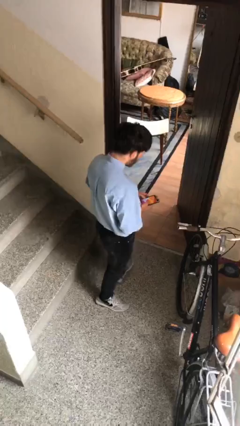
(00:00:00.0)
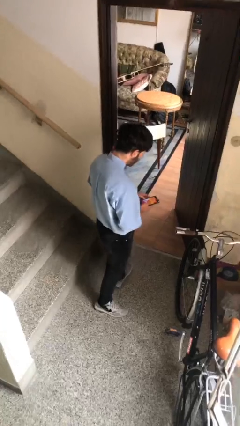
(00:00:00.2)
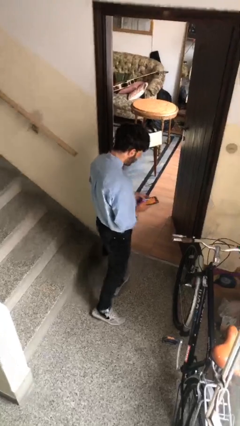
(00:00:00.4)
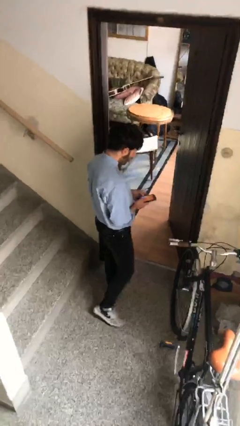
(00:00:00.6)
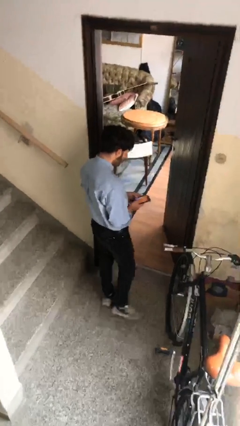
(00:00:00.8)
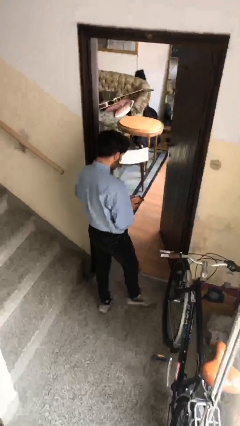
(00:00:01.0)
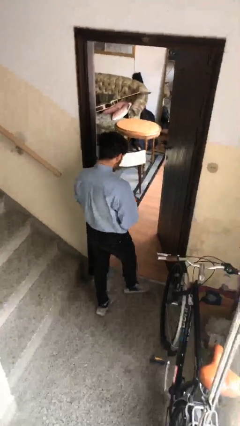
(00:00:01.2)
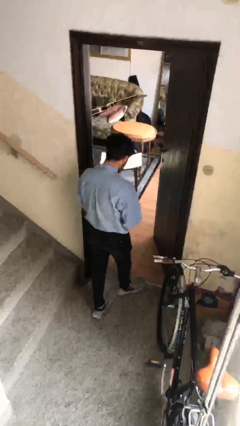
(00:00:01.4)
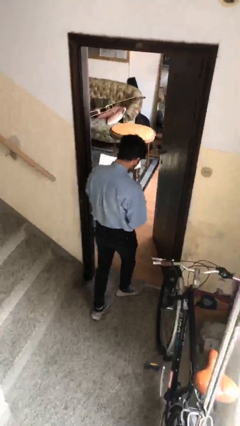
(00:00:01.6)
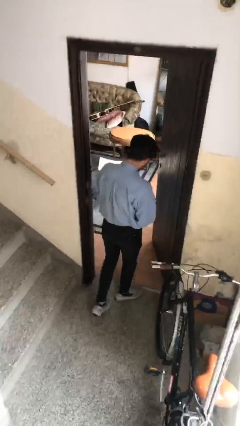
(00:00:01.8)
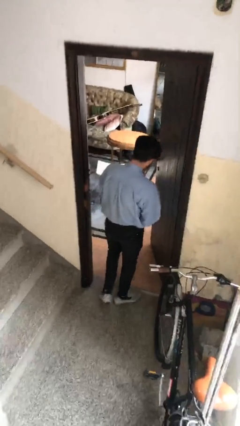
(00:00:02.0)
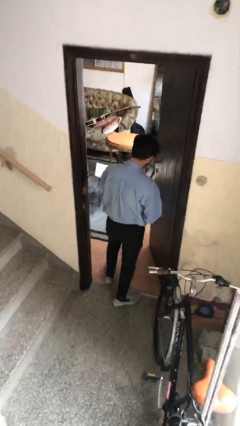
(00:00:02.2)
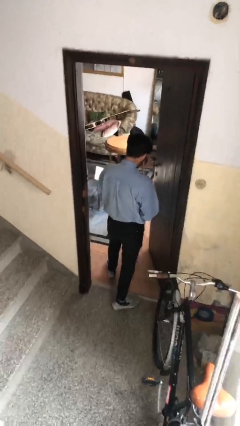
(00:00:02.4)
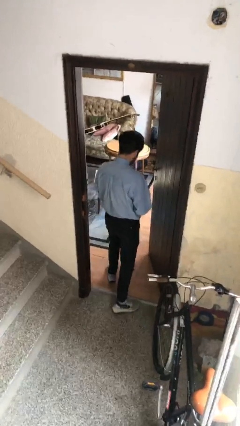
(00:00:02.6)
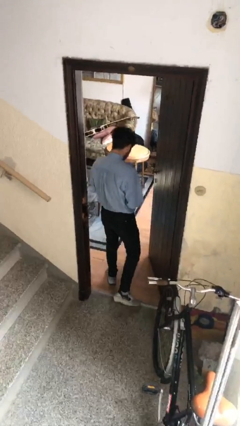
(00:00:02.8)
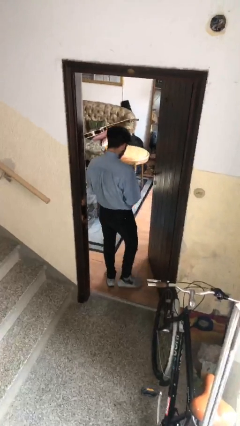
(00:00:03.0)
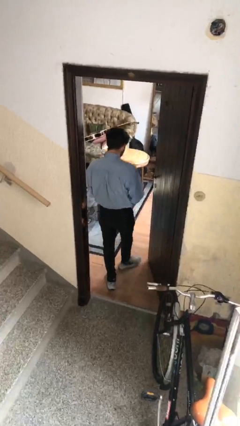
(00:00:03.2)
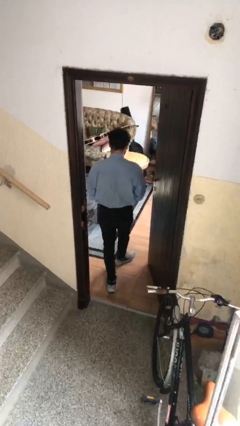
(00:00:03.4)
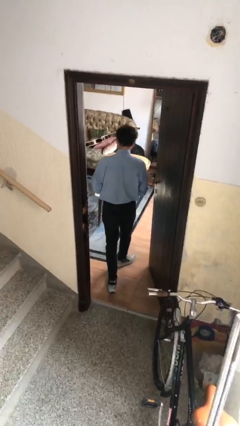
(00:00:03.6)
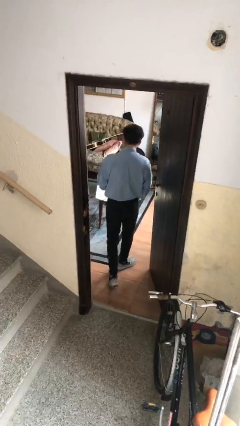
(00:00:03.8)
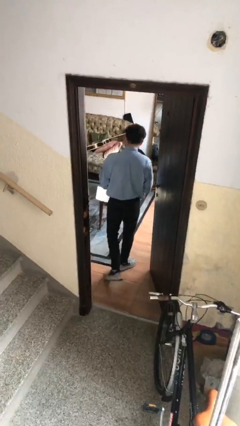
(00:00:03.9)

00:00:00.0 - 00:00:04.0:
person texts on phone

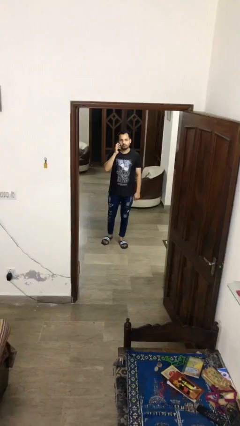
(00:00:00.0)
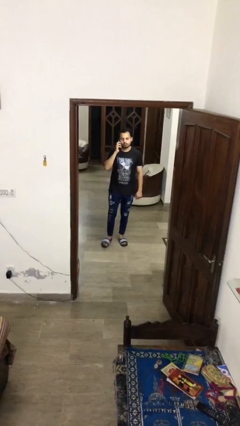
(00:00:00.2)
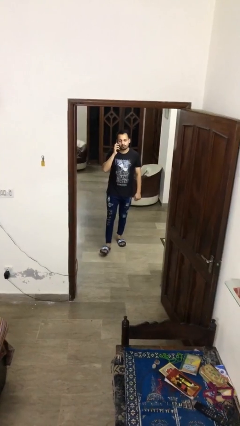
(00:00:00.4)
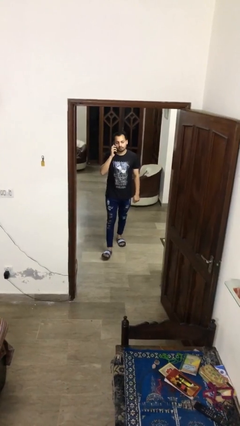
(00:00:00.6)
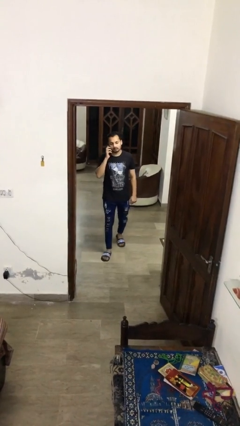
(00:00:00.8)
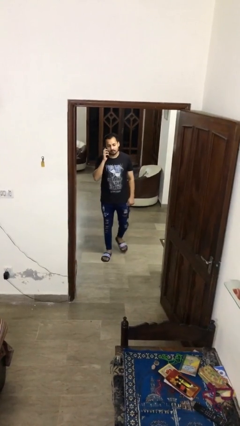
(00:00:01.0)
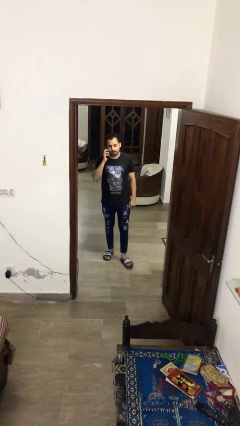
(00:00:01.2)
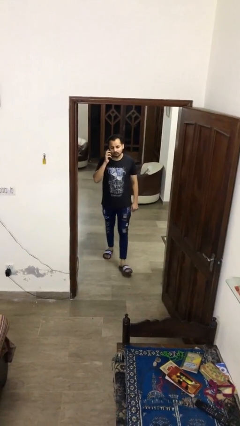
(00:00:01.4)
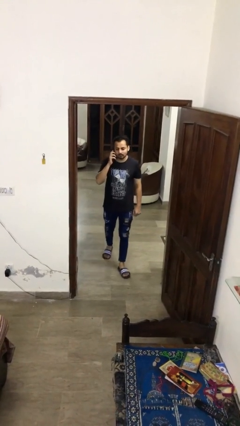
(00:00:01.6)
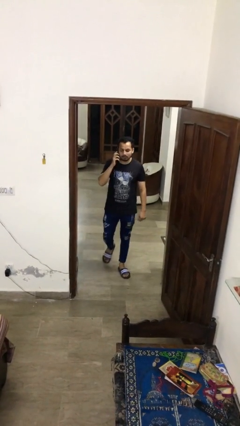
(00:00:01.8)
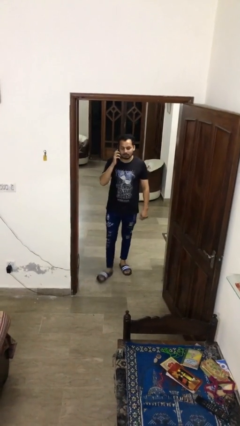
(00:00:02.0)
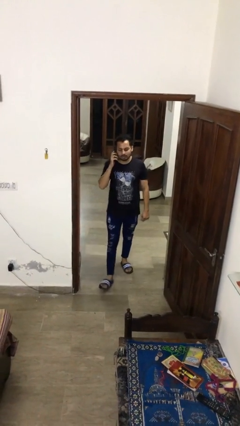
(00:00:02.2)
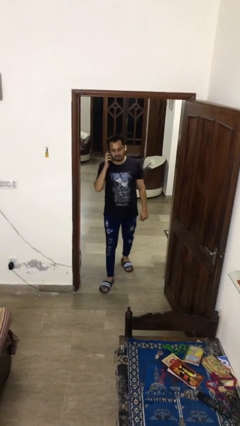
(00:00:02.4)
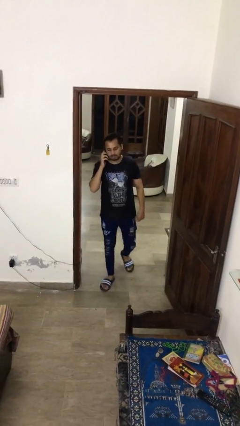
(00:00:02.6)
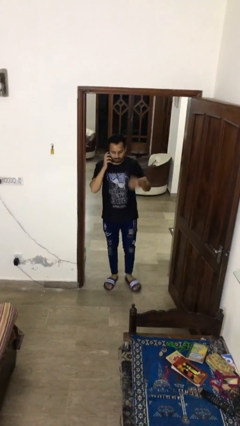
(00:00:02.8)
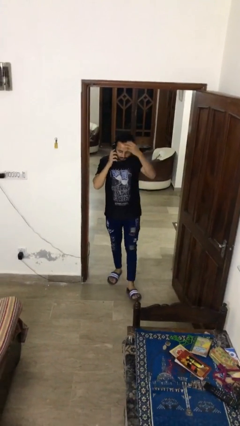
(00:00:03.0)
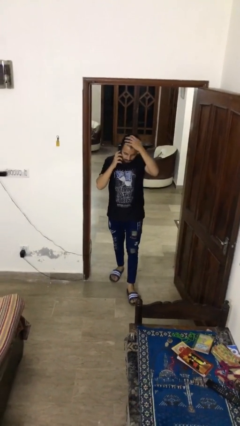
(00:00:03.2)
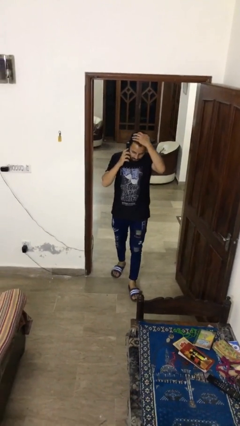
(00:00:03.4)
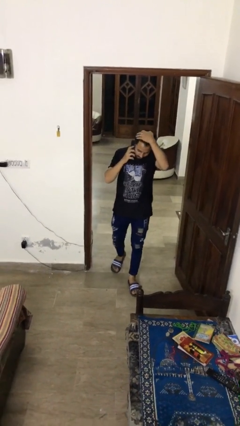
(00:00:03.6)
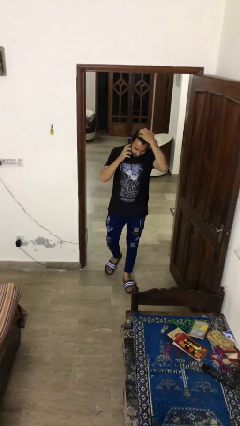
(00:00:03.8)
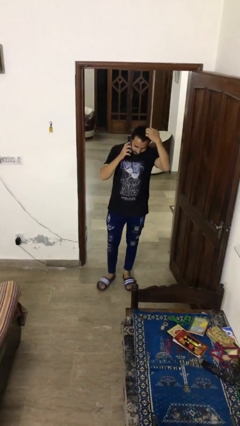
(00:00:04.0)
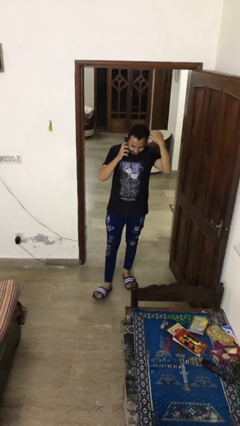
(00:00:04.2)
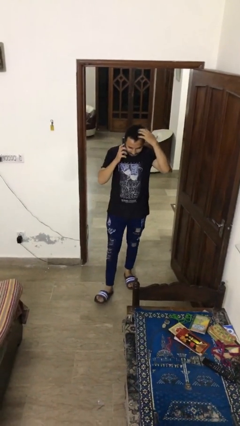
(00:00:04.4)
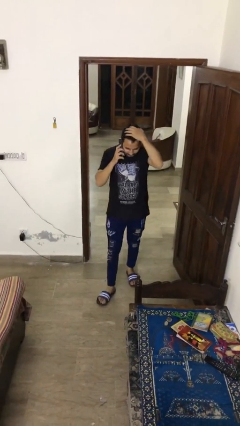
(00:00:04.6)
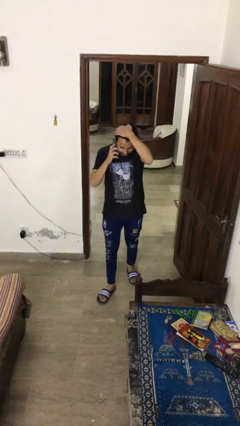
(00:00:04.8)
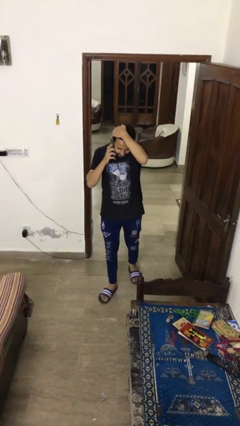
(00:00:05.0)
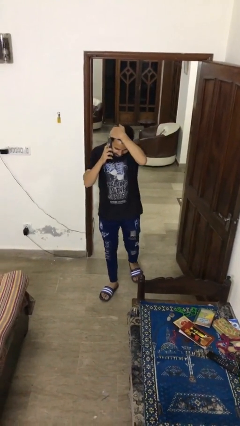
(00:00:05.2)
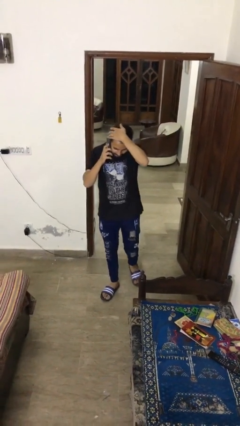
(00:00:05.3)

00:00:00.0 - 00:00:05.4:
person enters scene through structure

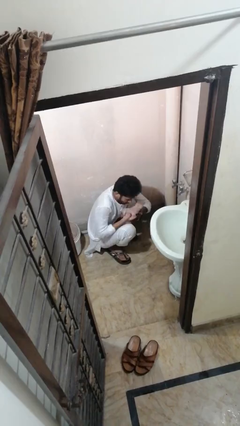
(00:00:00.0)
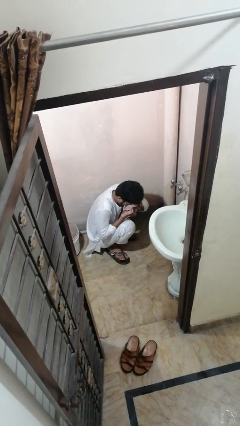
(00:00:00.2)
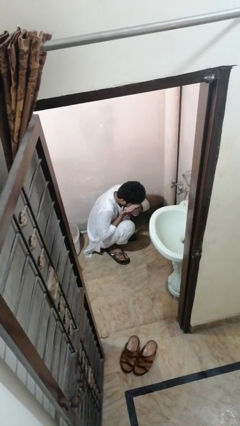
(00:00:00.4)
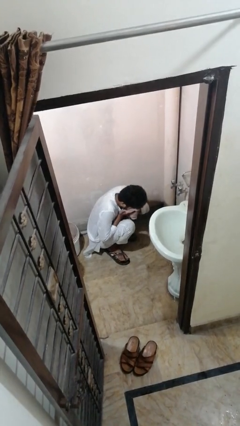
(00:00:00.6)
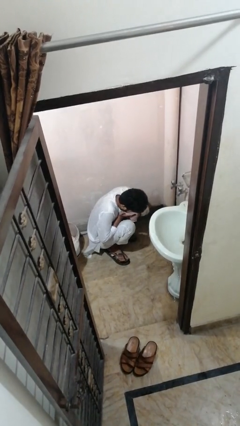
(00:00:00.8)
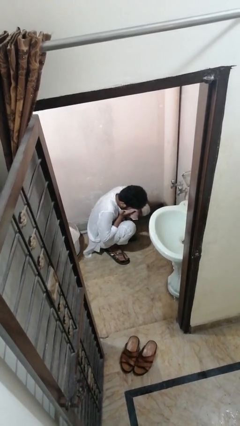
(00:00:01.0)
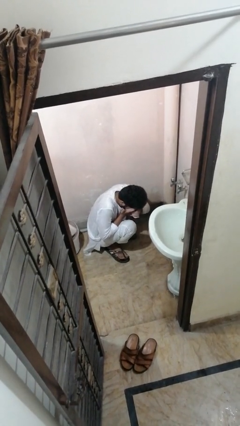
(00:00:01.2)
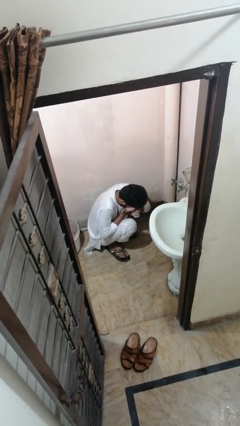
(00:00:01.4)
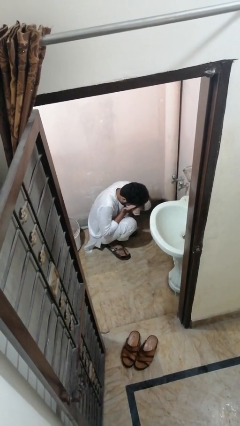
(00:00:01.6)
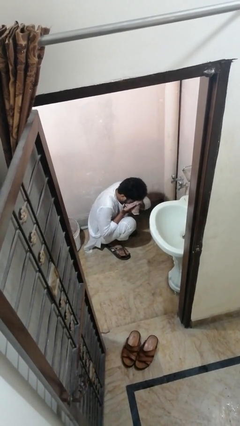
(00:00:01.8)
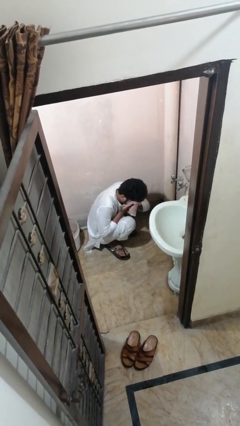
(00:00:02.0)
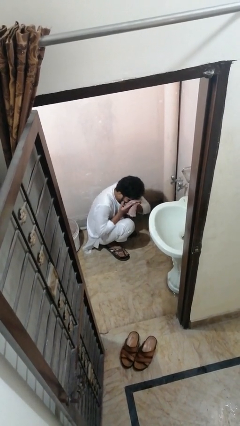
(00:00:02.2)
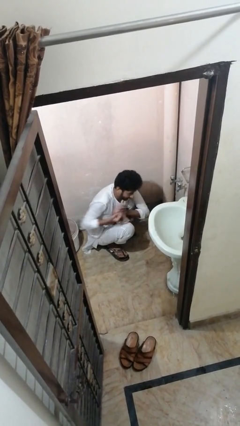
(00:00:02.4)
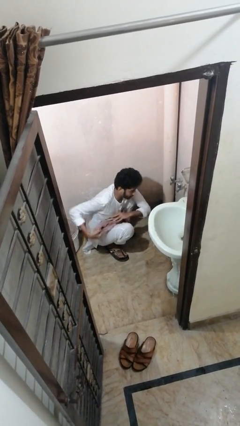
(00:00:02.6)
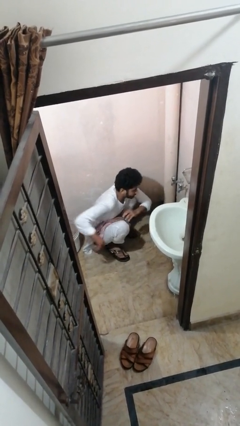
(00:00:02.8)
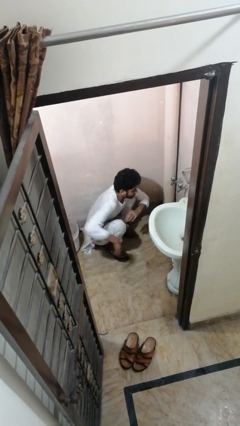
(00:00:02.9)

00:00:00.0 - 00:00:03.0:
person dries face with towel

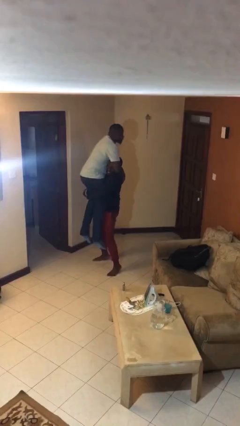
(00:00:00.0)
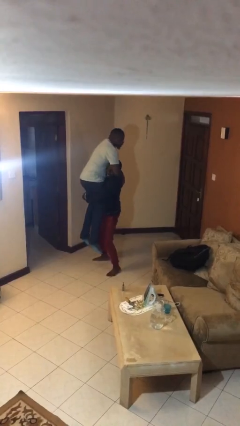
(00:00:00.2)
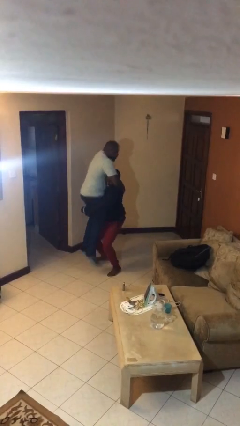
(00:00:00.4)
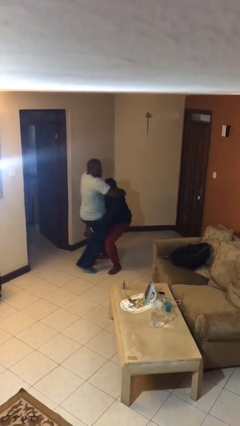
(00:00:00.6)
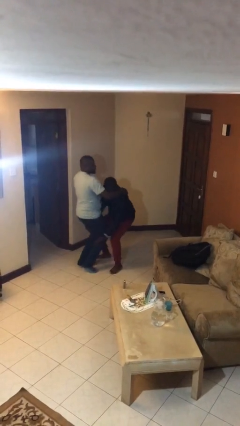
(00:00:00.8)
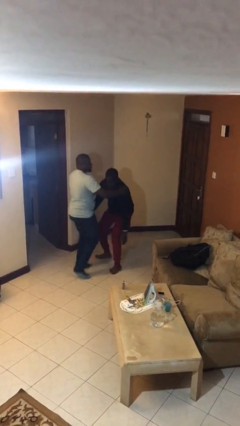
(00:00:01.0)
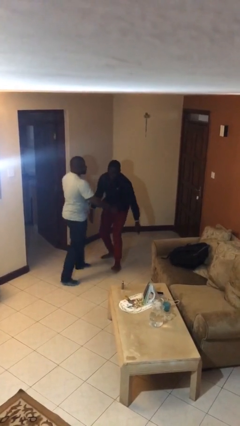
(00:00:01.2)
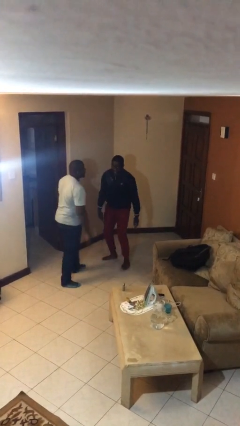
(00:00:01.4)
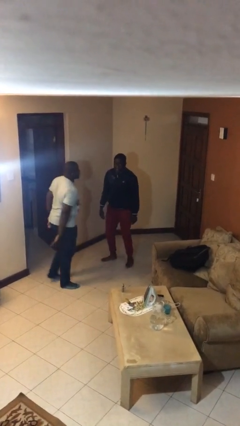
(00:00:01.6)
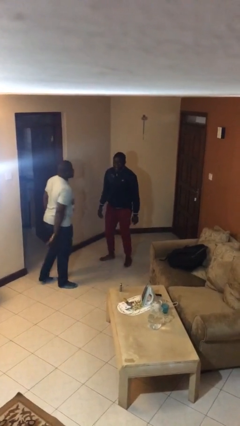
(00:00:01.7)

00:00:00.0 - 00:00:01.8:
person puts down person

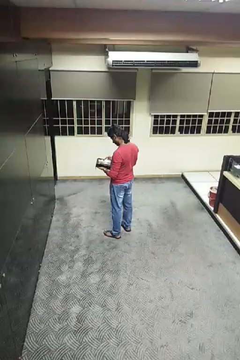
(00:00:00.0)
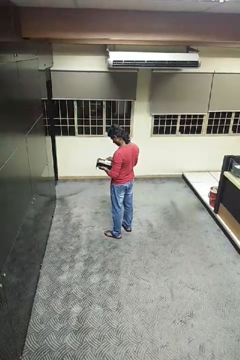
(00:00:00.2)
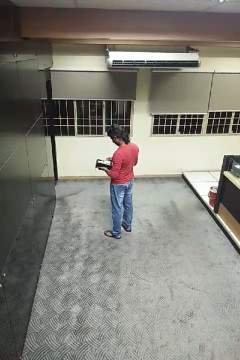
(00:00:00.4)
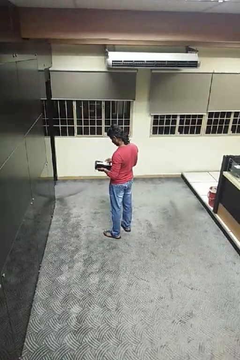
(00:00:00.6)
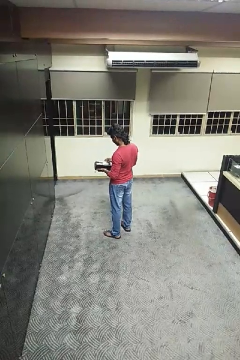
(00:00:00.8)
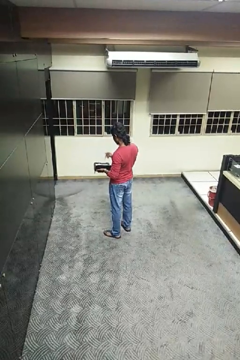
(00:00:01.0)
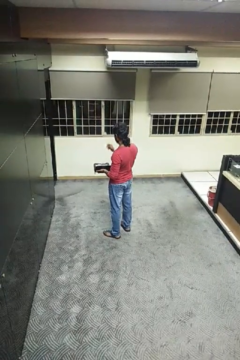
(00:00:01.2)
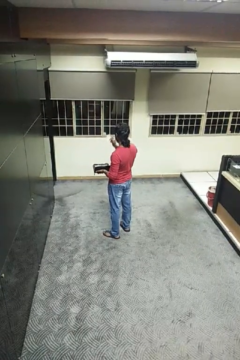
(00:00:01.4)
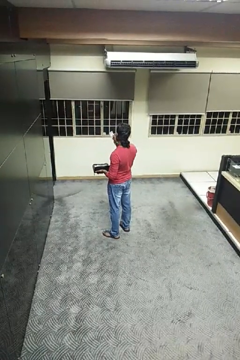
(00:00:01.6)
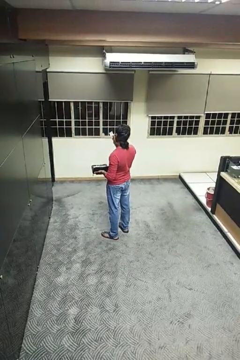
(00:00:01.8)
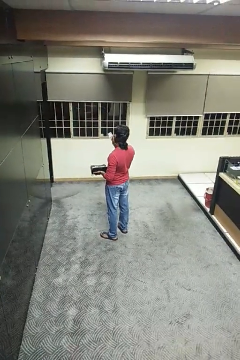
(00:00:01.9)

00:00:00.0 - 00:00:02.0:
person takes object from purse

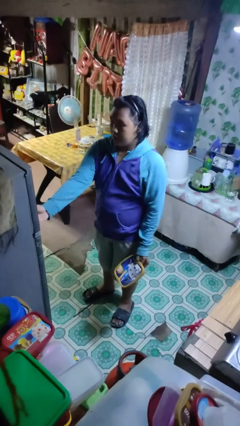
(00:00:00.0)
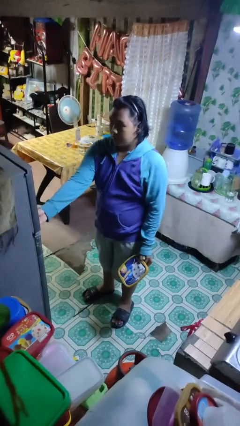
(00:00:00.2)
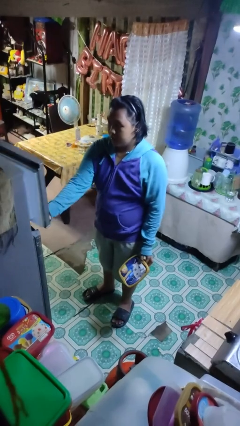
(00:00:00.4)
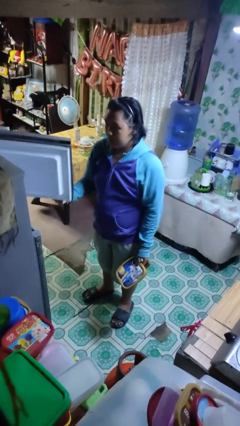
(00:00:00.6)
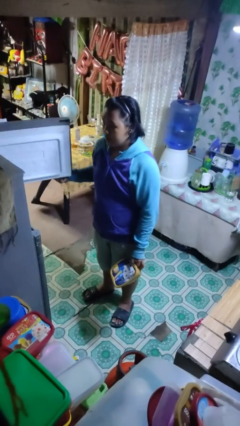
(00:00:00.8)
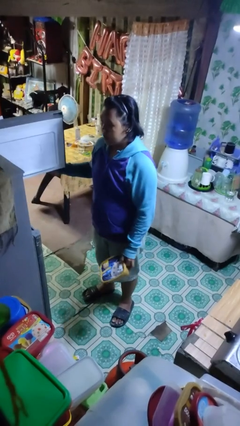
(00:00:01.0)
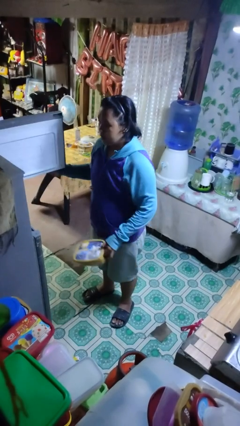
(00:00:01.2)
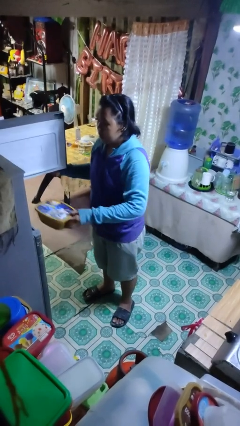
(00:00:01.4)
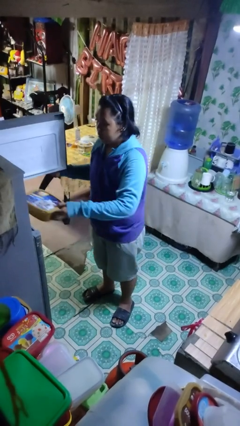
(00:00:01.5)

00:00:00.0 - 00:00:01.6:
person opens refrigerator
